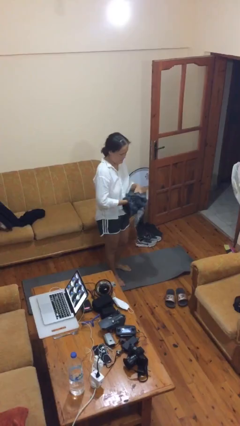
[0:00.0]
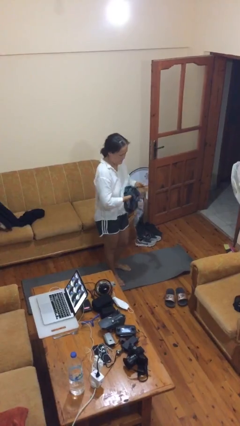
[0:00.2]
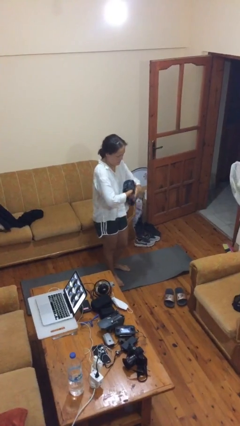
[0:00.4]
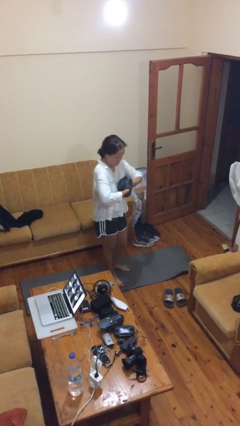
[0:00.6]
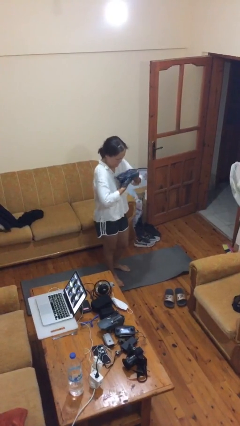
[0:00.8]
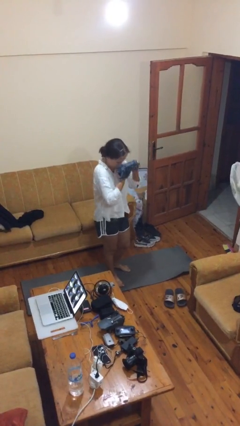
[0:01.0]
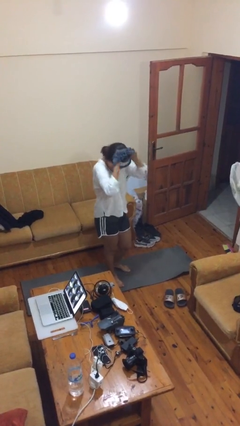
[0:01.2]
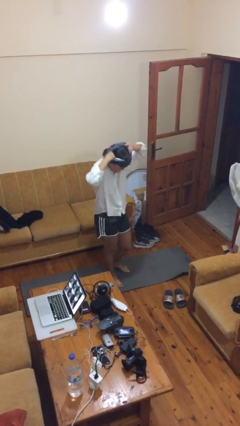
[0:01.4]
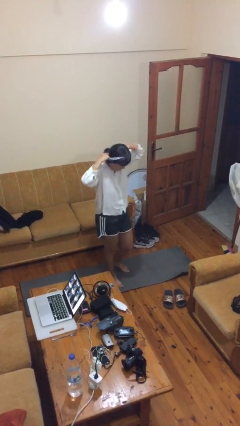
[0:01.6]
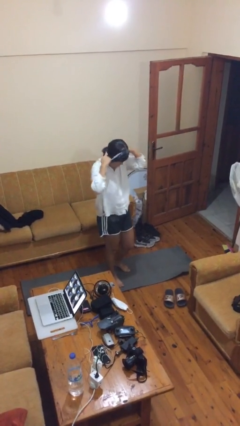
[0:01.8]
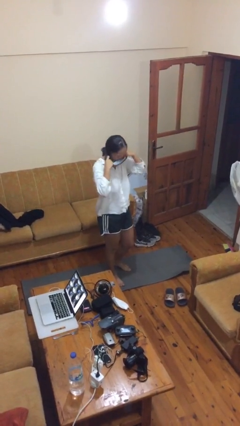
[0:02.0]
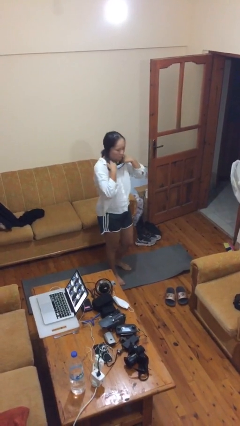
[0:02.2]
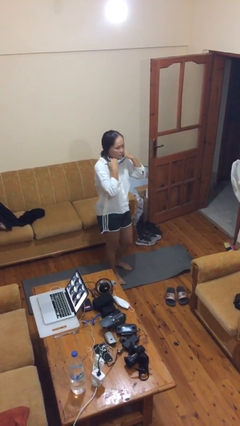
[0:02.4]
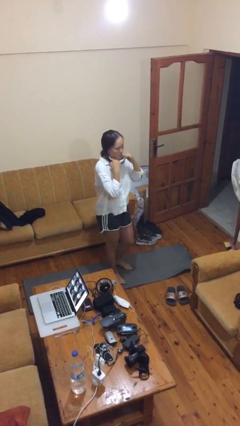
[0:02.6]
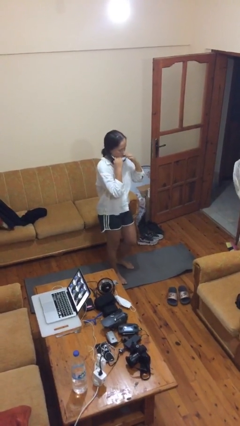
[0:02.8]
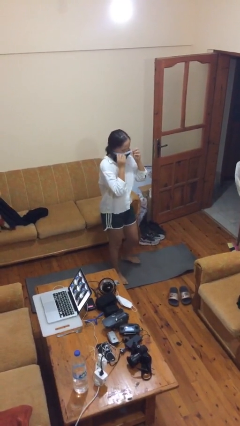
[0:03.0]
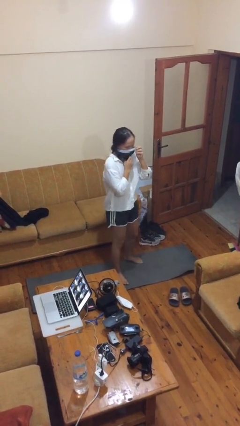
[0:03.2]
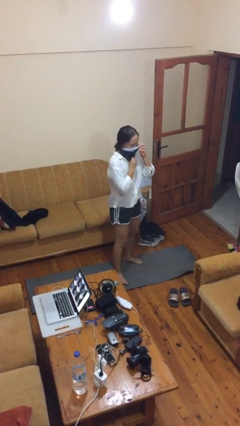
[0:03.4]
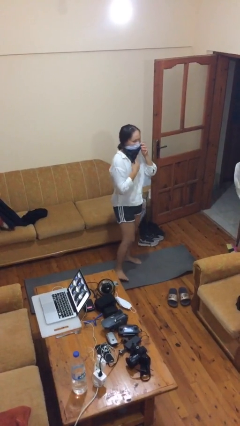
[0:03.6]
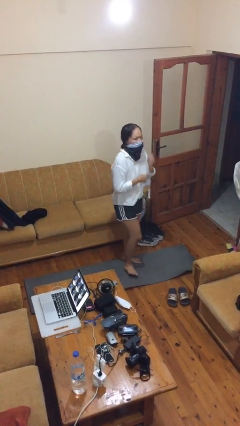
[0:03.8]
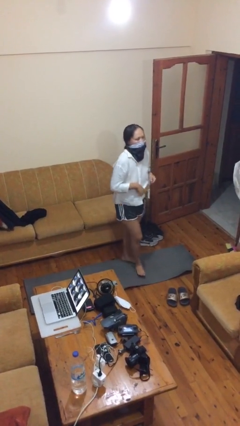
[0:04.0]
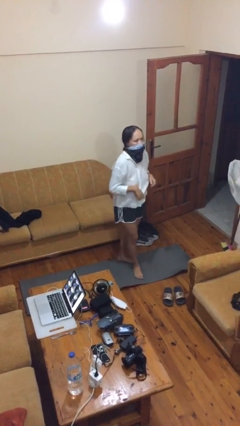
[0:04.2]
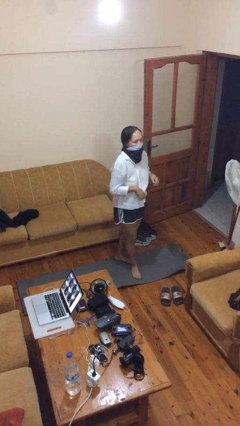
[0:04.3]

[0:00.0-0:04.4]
person puts on scarf

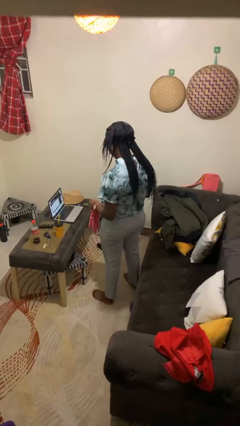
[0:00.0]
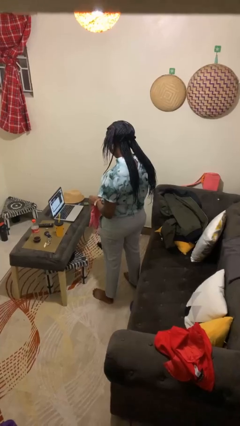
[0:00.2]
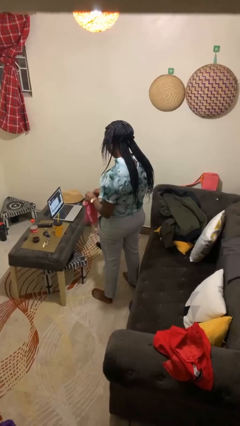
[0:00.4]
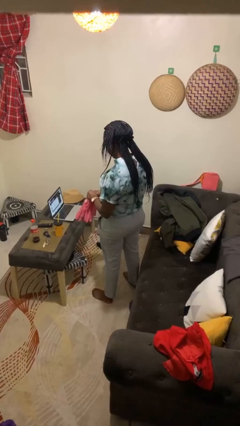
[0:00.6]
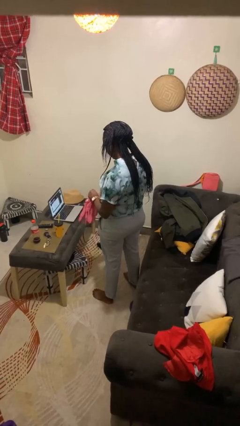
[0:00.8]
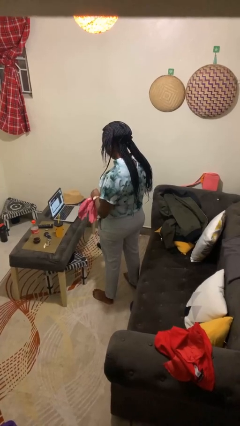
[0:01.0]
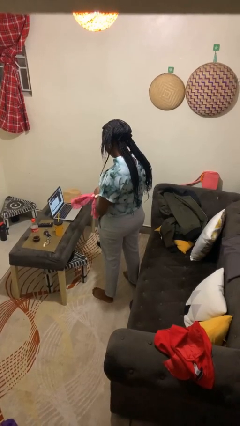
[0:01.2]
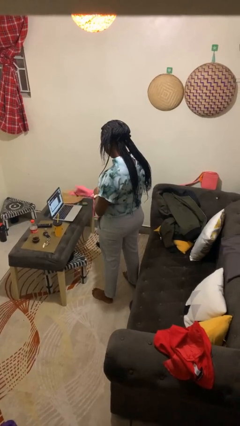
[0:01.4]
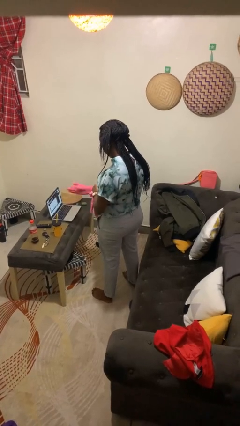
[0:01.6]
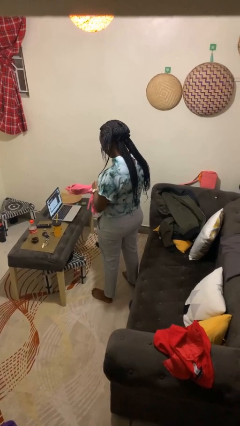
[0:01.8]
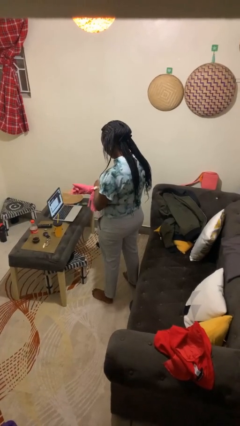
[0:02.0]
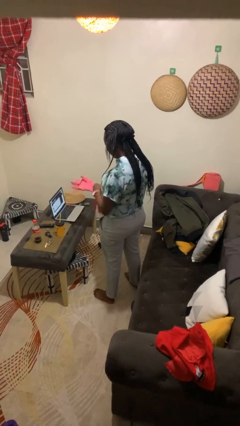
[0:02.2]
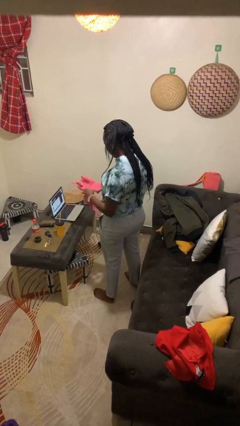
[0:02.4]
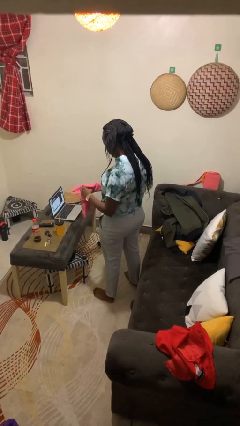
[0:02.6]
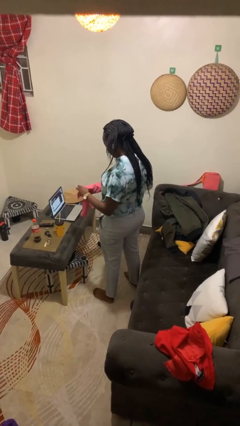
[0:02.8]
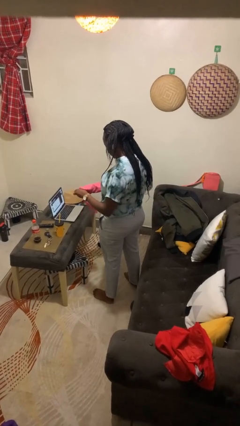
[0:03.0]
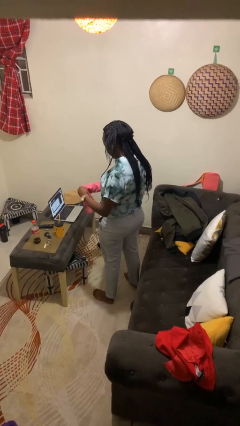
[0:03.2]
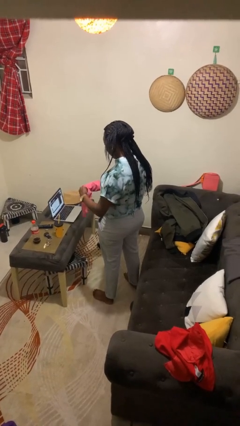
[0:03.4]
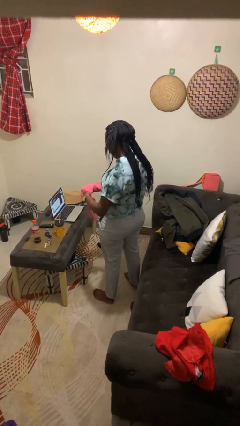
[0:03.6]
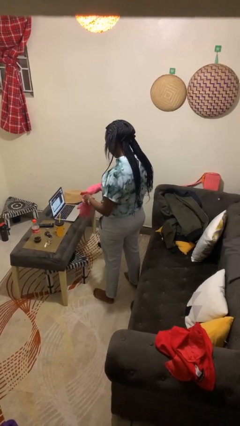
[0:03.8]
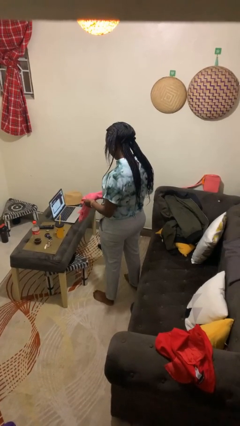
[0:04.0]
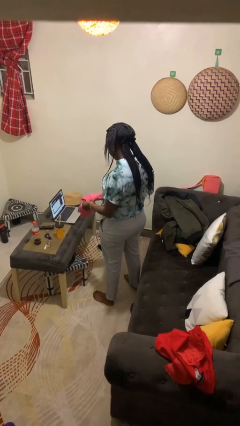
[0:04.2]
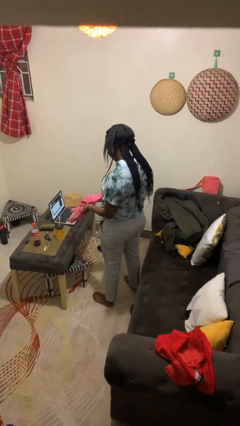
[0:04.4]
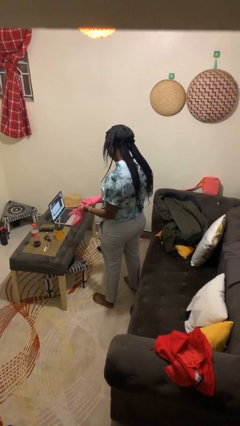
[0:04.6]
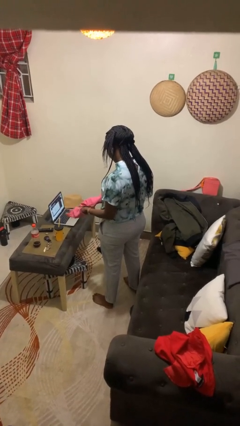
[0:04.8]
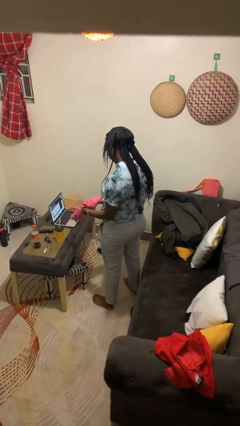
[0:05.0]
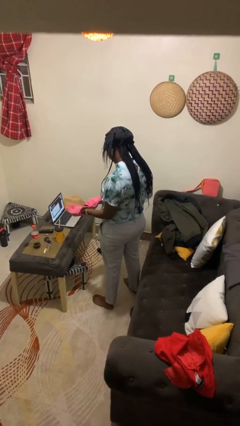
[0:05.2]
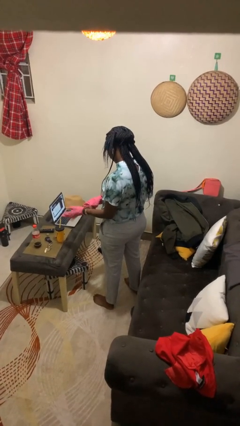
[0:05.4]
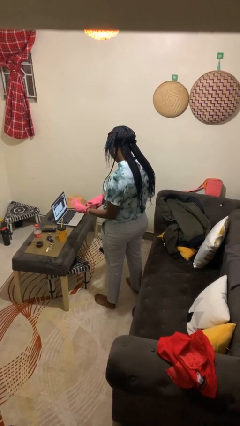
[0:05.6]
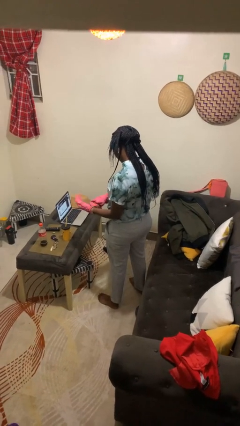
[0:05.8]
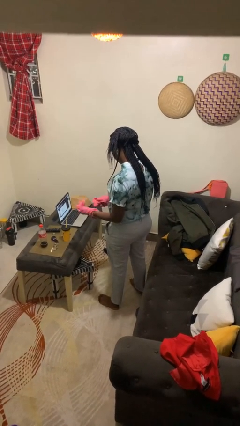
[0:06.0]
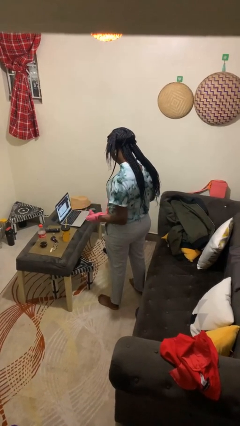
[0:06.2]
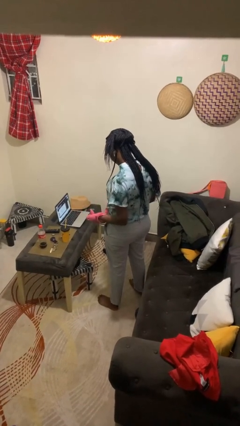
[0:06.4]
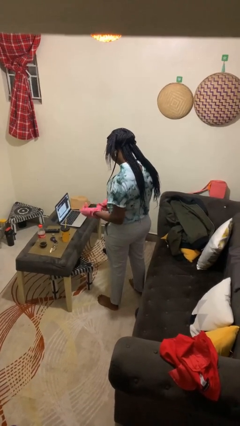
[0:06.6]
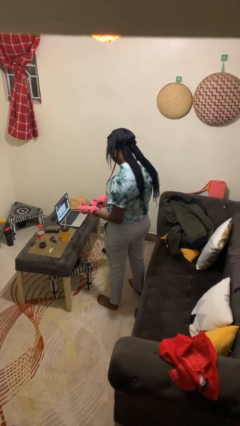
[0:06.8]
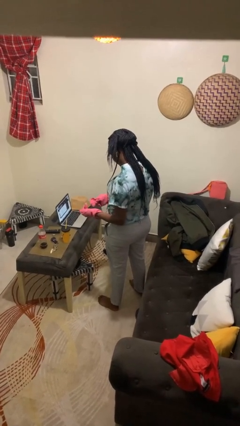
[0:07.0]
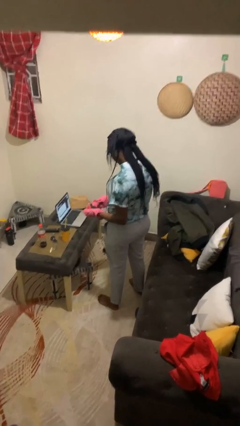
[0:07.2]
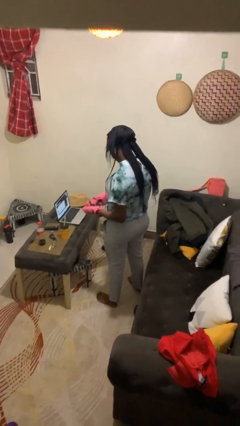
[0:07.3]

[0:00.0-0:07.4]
person puts on gloves

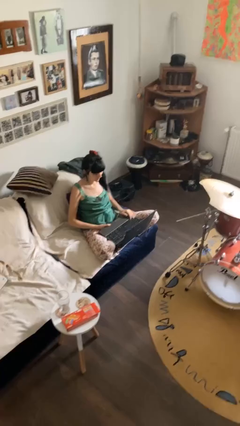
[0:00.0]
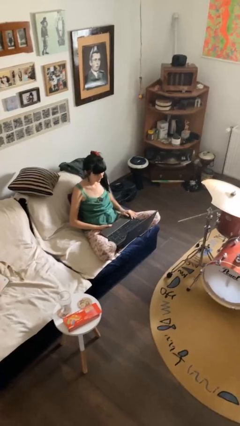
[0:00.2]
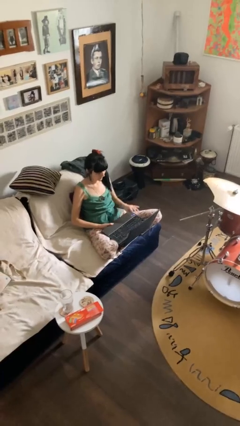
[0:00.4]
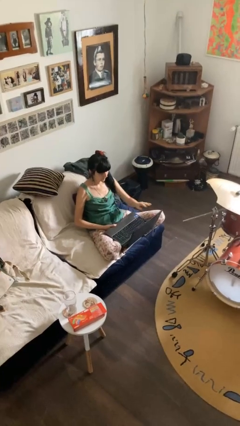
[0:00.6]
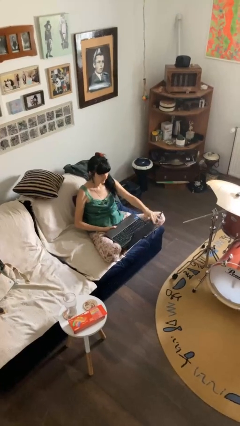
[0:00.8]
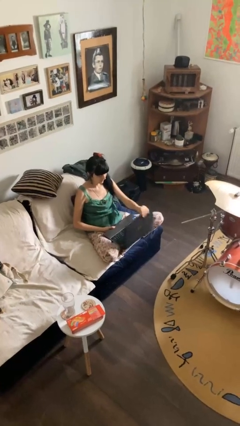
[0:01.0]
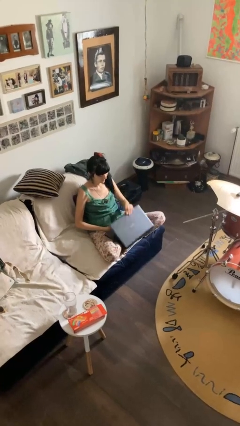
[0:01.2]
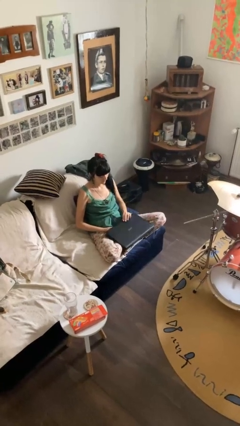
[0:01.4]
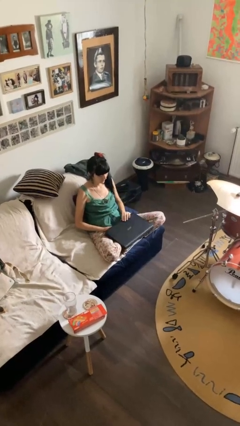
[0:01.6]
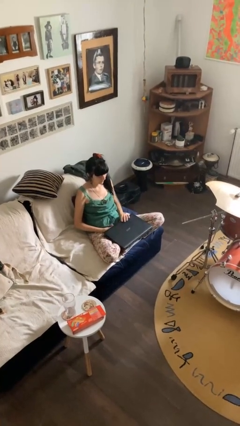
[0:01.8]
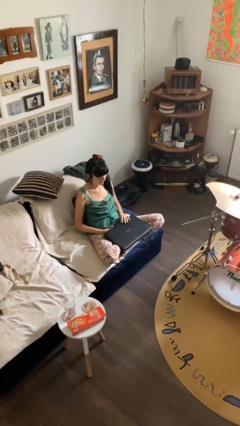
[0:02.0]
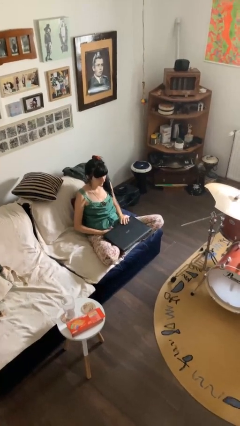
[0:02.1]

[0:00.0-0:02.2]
person closes laptop

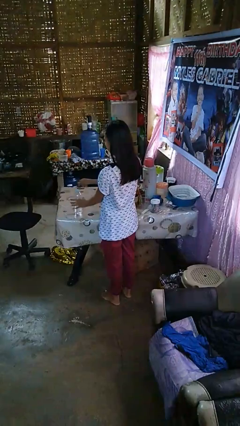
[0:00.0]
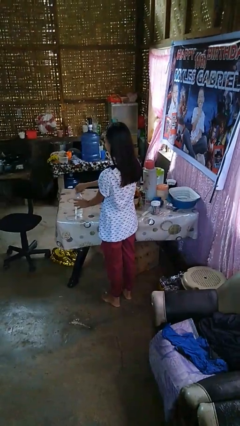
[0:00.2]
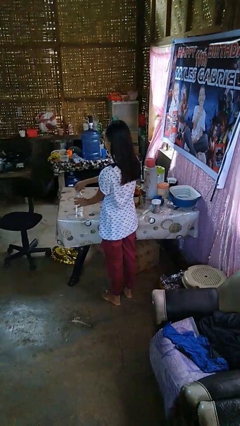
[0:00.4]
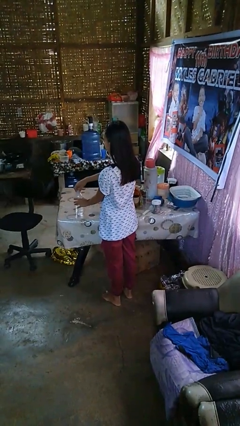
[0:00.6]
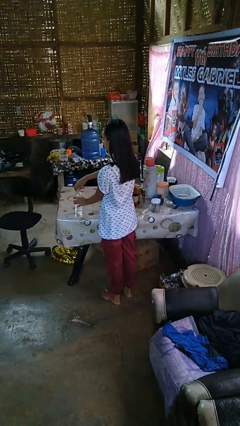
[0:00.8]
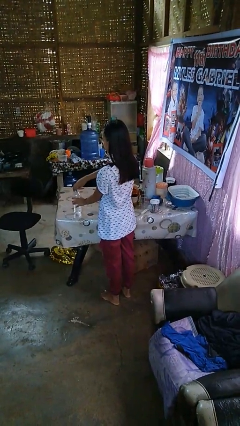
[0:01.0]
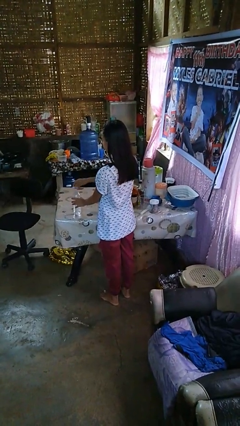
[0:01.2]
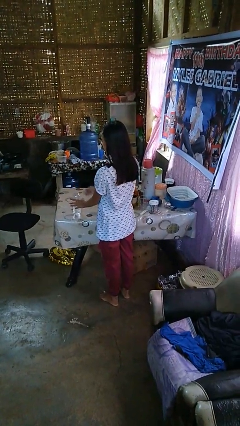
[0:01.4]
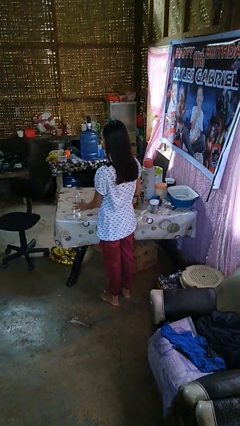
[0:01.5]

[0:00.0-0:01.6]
person unscrews lid from bottle

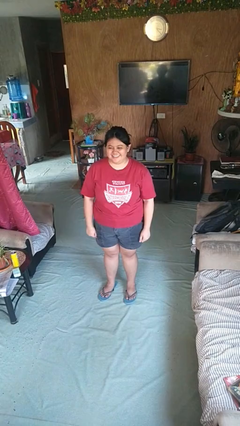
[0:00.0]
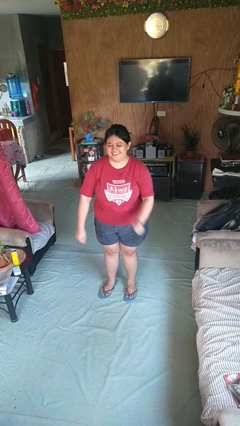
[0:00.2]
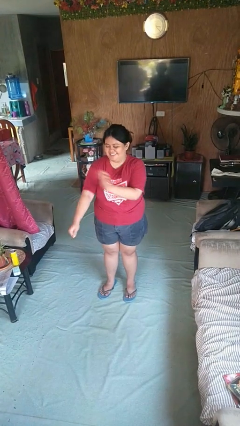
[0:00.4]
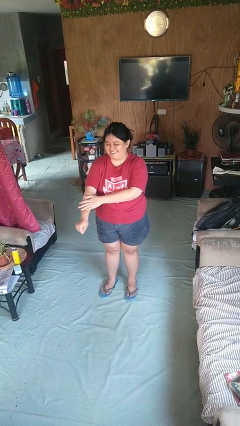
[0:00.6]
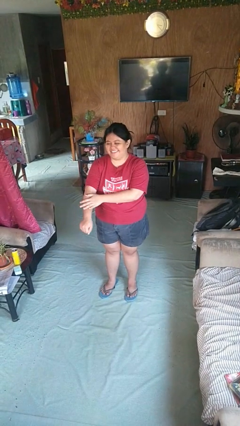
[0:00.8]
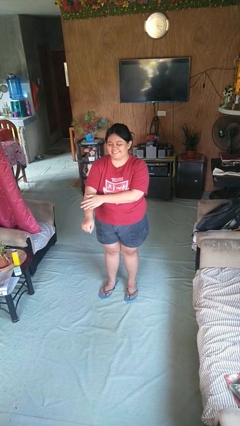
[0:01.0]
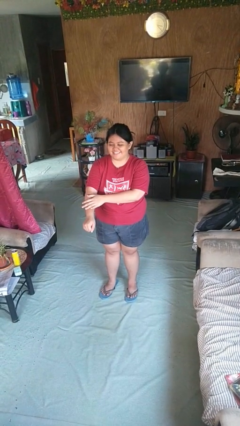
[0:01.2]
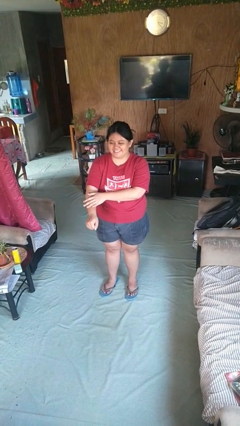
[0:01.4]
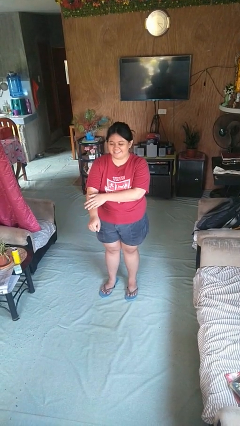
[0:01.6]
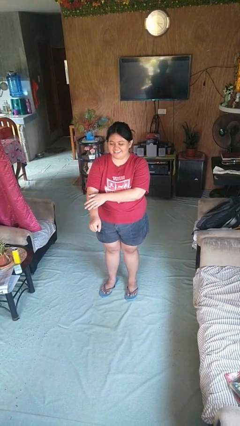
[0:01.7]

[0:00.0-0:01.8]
person swats bug

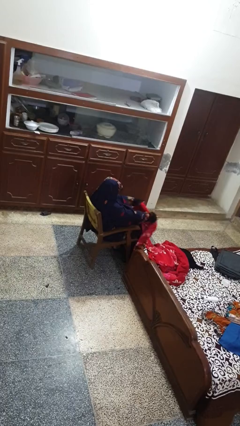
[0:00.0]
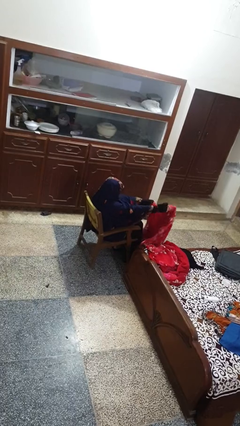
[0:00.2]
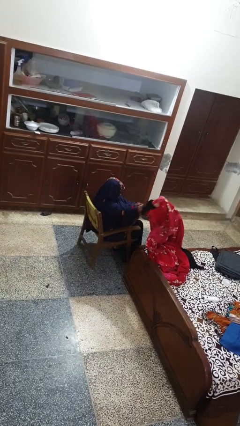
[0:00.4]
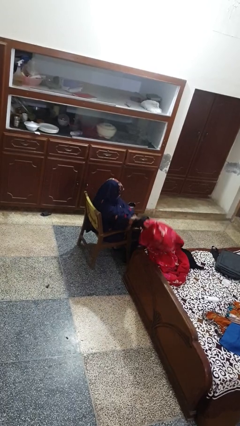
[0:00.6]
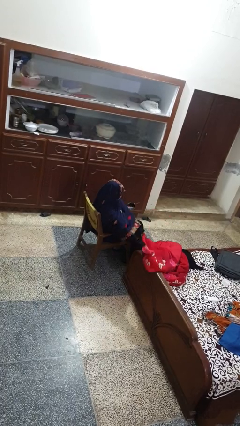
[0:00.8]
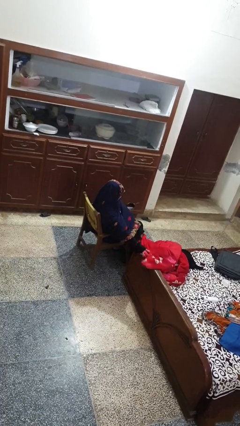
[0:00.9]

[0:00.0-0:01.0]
person uncovers with blanket
